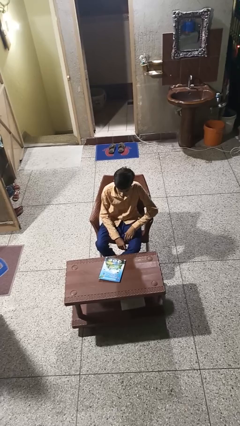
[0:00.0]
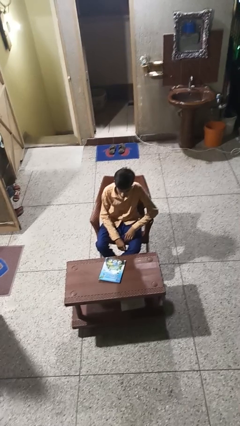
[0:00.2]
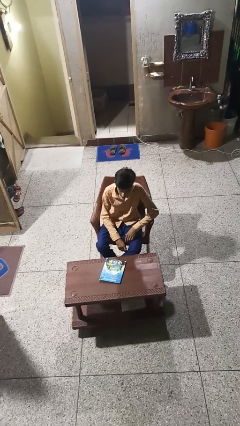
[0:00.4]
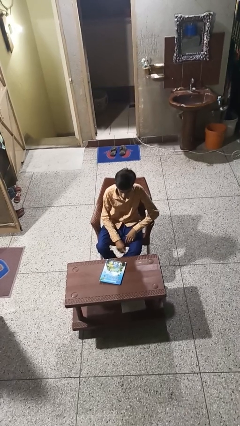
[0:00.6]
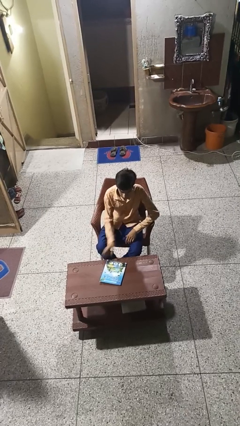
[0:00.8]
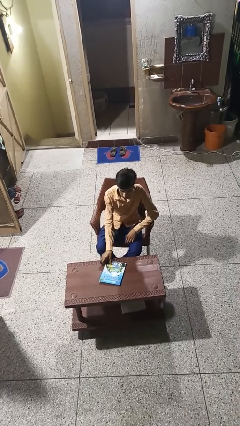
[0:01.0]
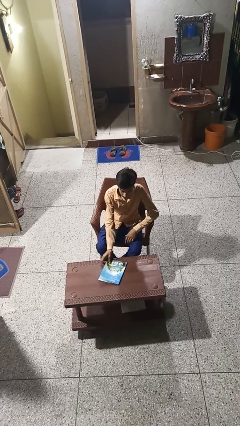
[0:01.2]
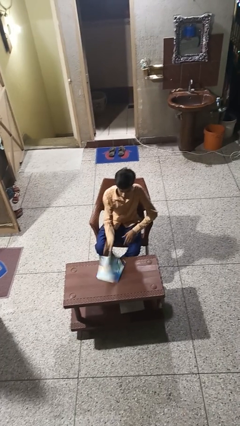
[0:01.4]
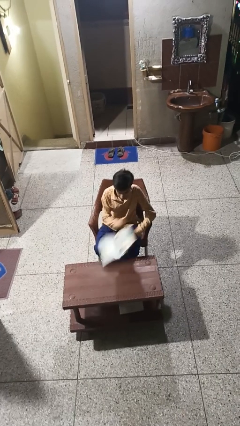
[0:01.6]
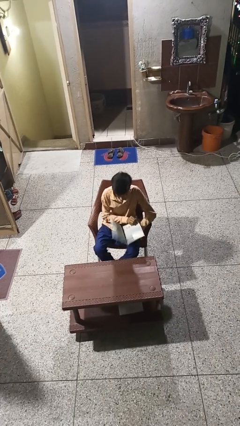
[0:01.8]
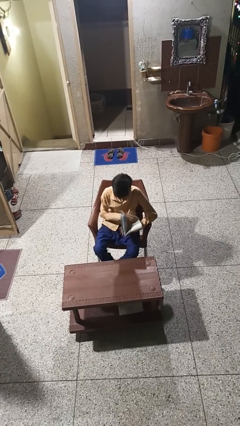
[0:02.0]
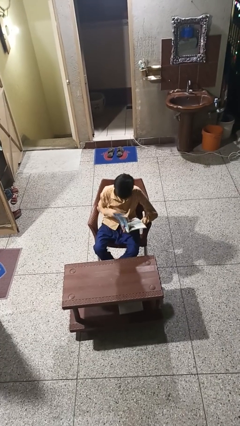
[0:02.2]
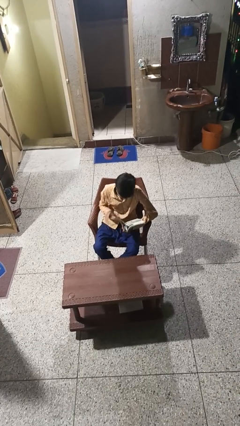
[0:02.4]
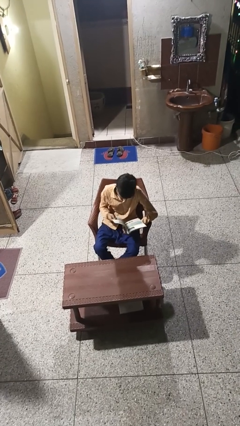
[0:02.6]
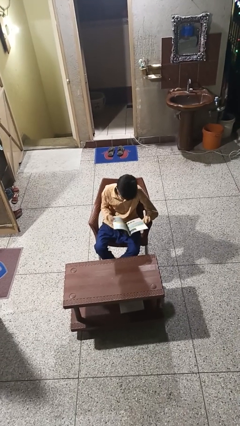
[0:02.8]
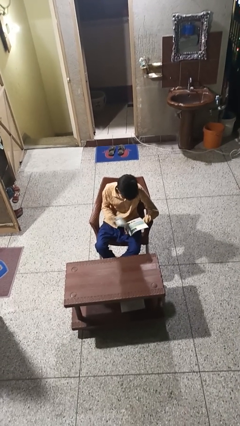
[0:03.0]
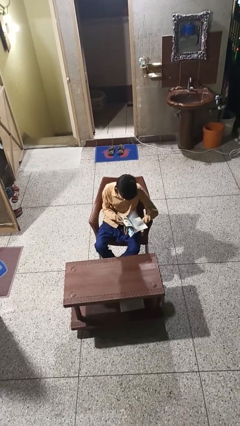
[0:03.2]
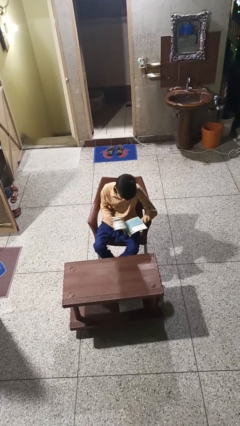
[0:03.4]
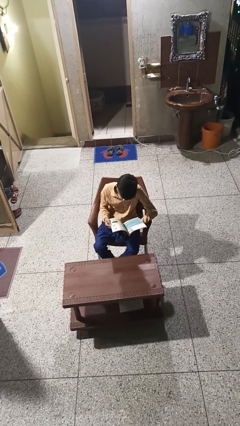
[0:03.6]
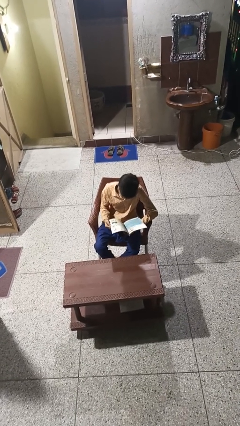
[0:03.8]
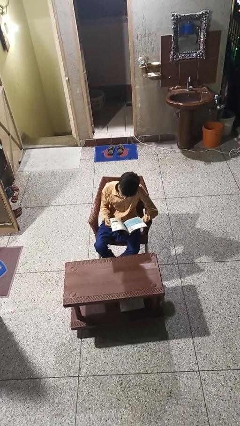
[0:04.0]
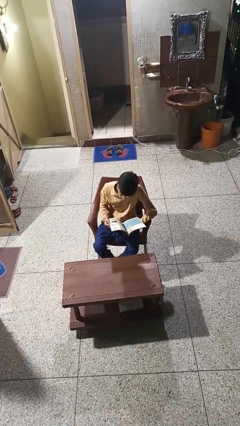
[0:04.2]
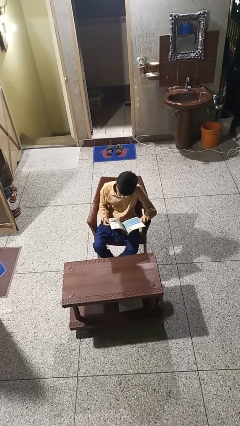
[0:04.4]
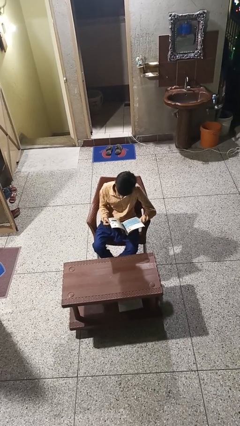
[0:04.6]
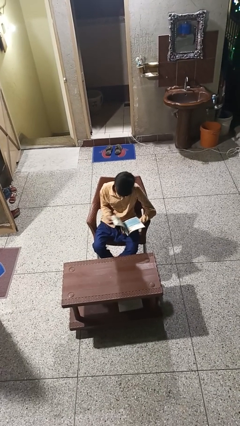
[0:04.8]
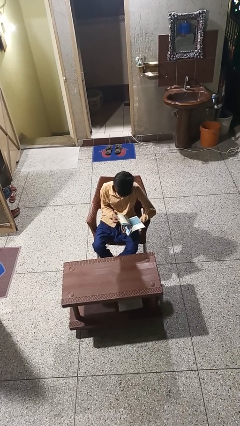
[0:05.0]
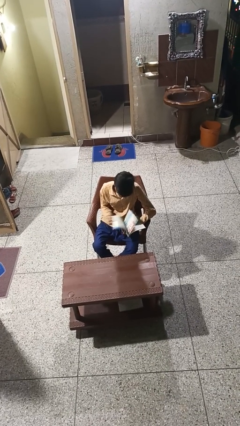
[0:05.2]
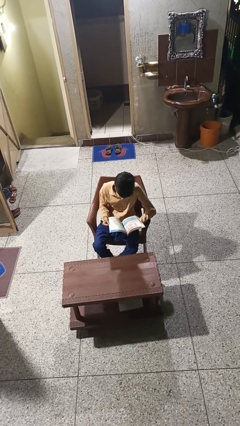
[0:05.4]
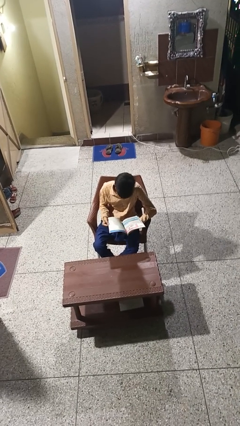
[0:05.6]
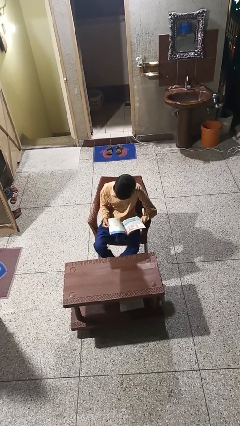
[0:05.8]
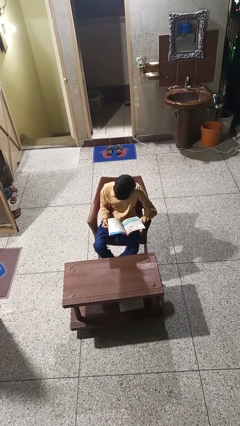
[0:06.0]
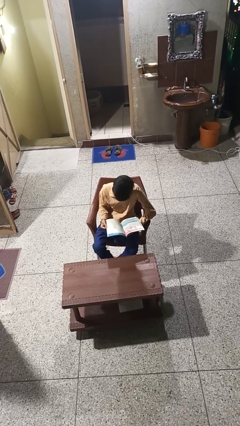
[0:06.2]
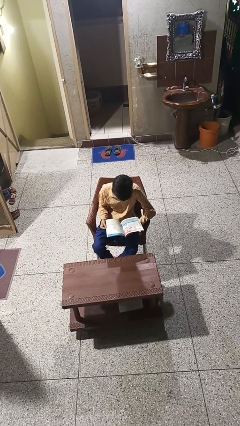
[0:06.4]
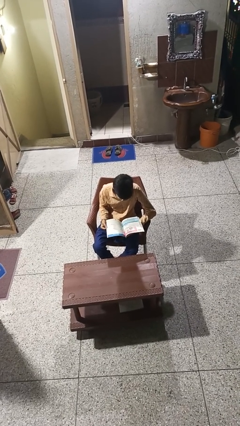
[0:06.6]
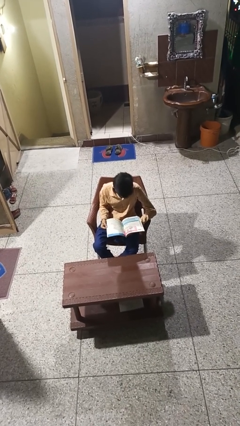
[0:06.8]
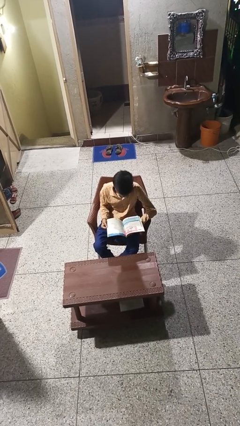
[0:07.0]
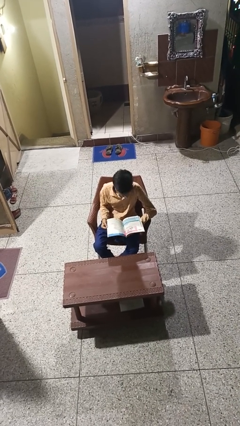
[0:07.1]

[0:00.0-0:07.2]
person reads book

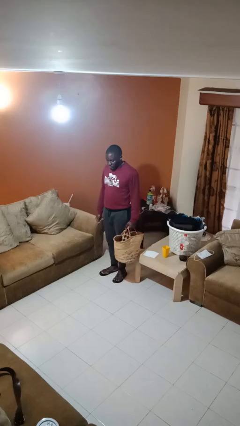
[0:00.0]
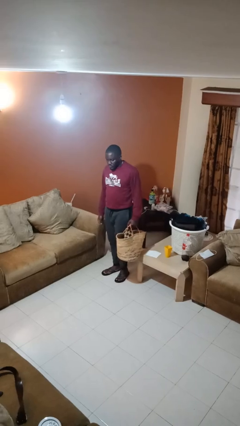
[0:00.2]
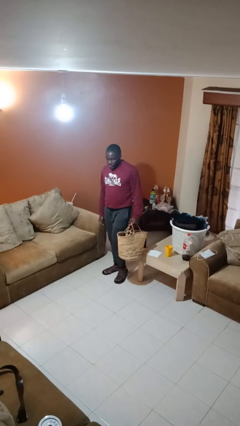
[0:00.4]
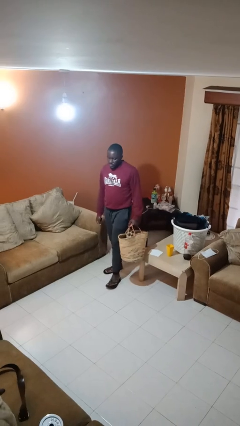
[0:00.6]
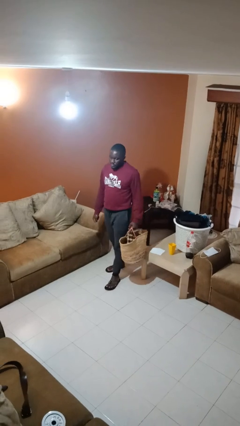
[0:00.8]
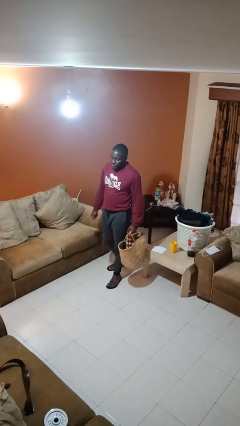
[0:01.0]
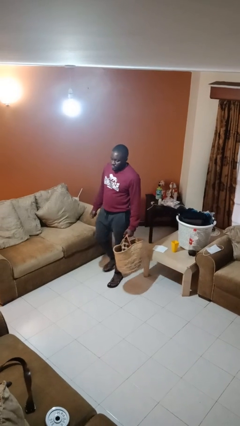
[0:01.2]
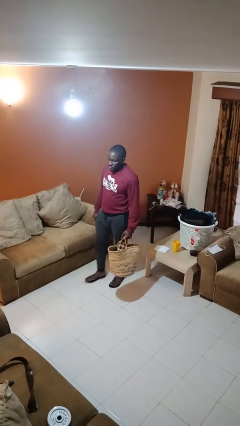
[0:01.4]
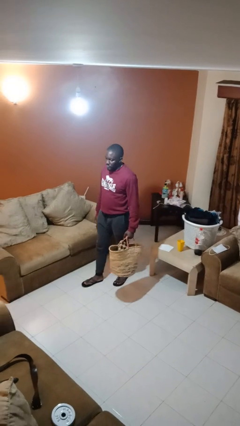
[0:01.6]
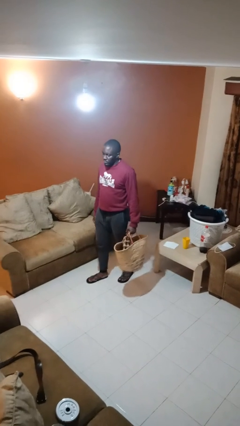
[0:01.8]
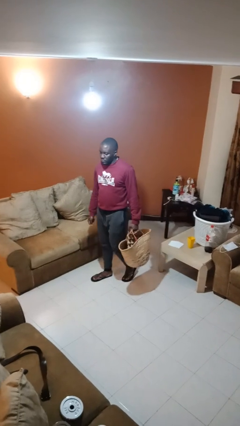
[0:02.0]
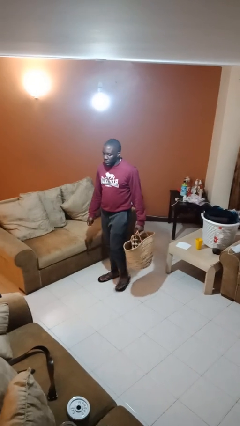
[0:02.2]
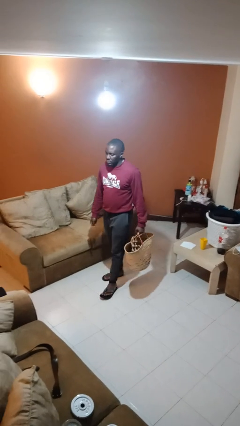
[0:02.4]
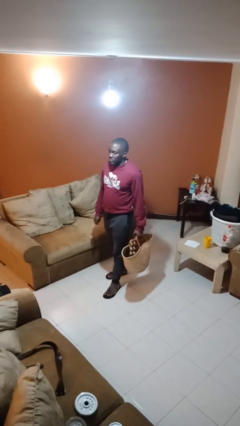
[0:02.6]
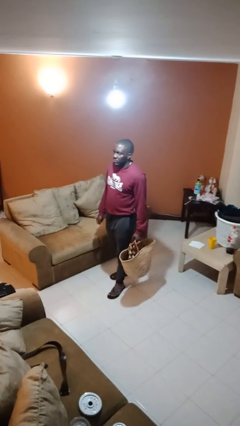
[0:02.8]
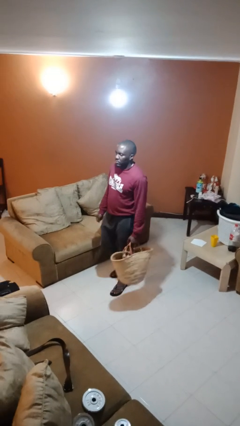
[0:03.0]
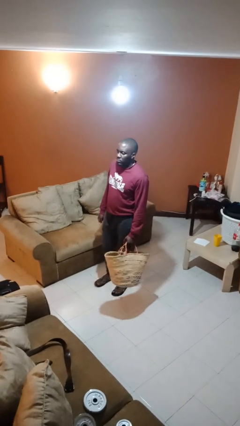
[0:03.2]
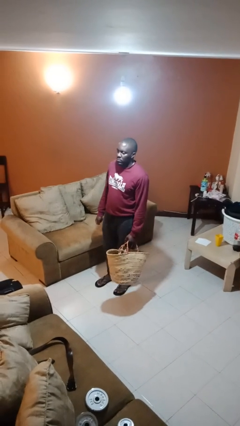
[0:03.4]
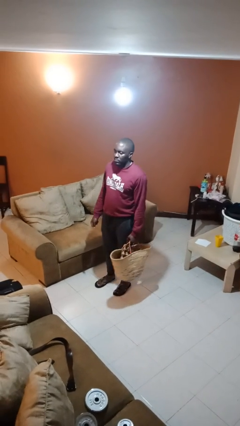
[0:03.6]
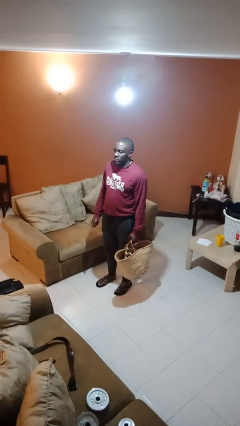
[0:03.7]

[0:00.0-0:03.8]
person carries groceries

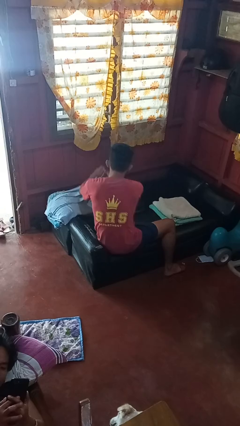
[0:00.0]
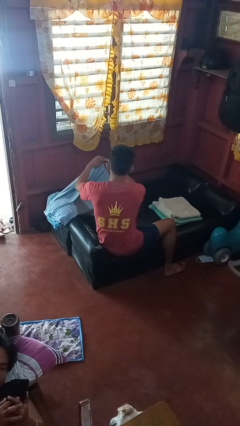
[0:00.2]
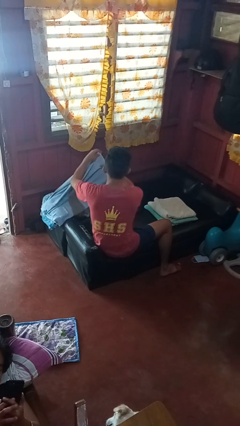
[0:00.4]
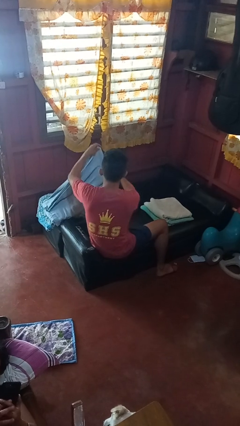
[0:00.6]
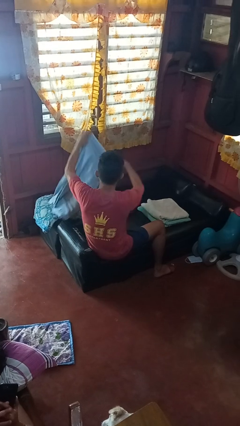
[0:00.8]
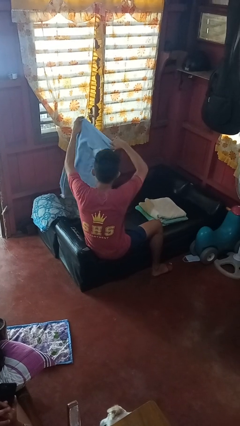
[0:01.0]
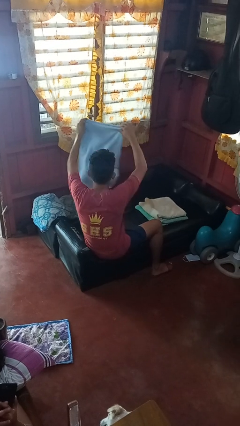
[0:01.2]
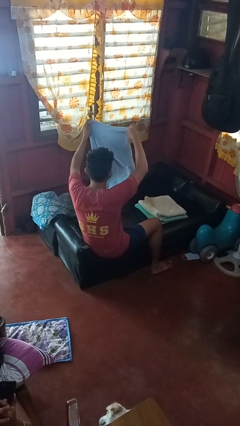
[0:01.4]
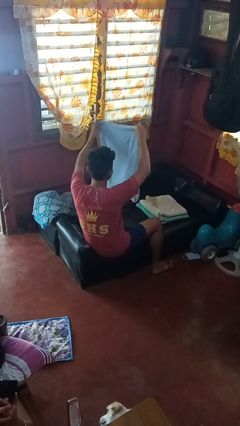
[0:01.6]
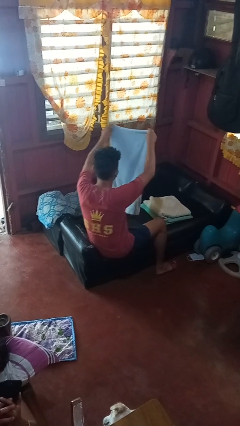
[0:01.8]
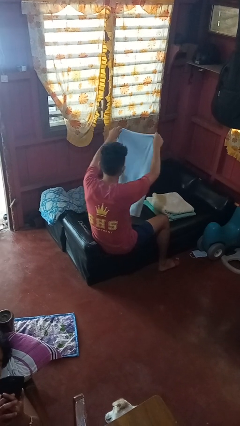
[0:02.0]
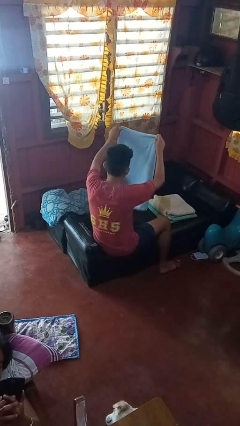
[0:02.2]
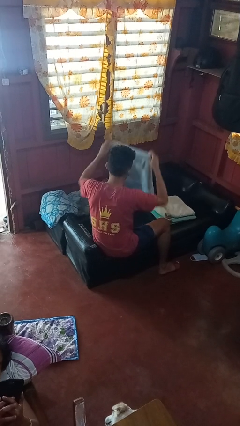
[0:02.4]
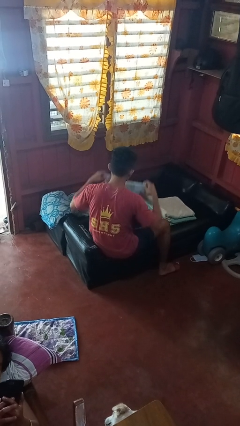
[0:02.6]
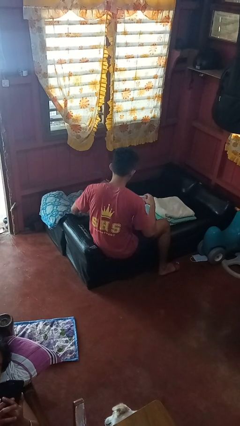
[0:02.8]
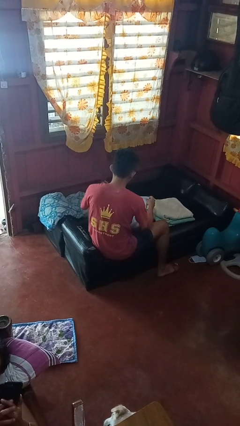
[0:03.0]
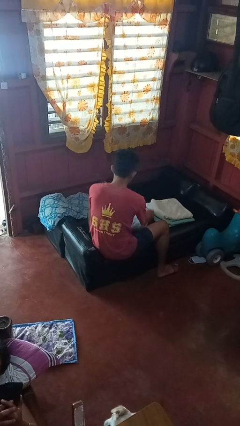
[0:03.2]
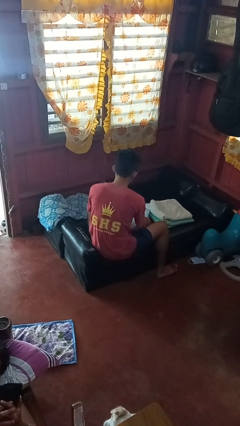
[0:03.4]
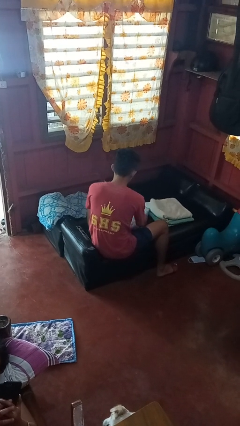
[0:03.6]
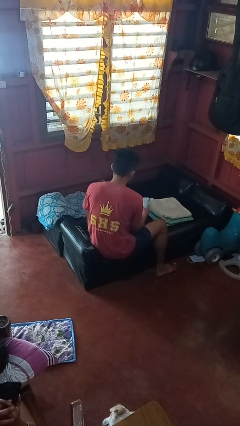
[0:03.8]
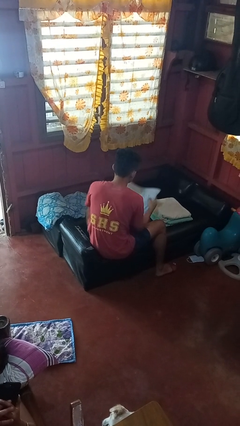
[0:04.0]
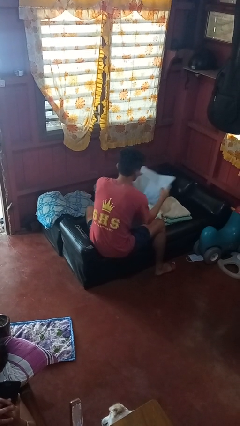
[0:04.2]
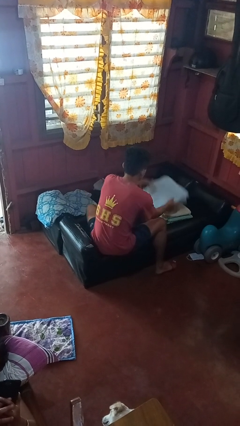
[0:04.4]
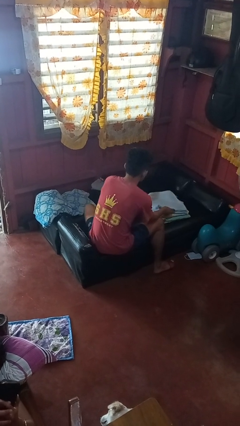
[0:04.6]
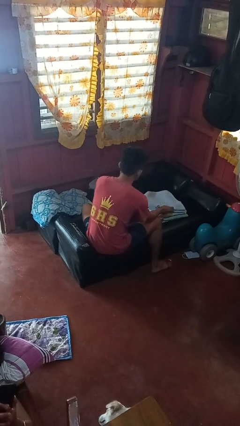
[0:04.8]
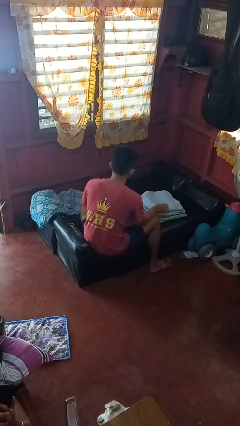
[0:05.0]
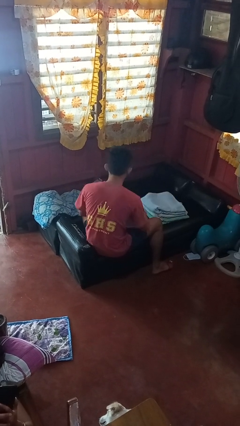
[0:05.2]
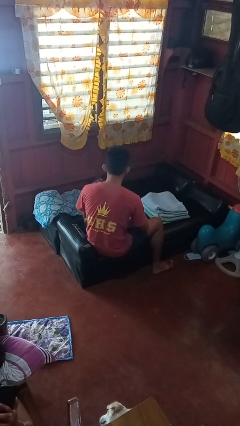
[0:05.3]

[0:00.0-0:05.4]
person folds towel

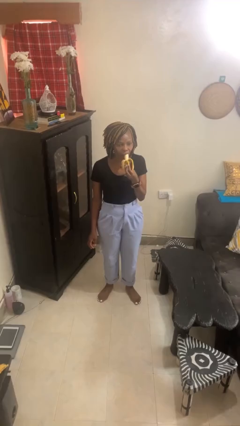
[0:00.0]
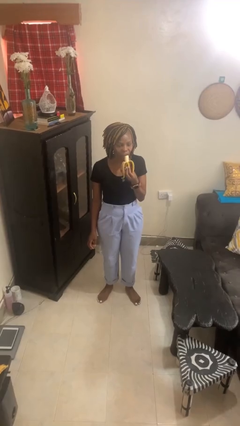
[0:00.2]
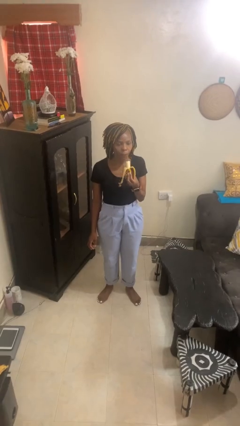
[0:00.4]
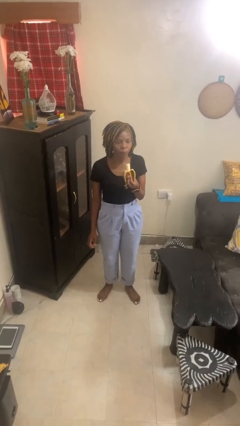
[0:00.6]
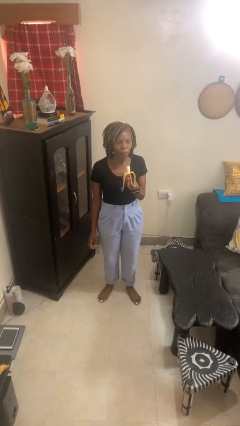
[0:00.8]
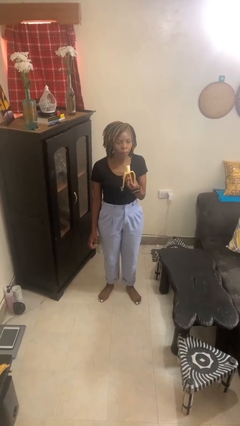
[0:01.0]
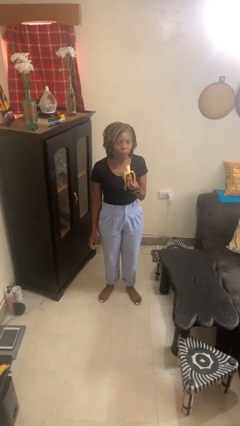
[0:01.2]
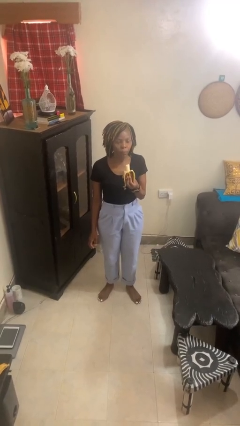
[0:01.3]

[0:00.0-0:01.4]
person eats banana
